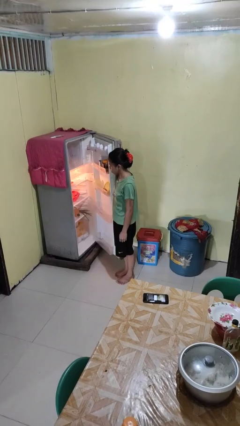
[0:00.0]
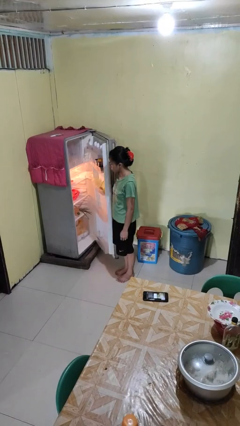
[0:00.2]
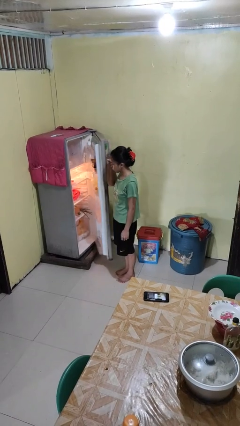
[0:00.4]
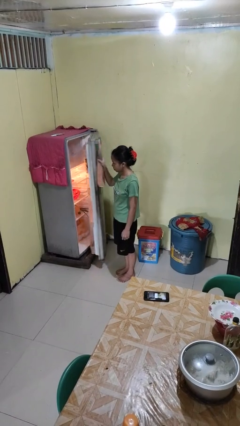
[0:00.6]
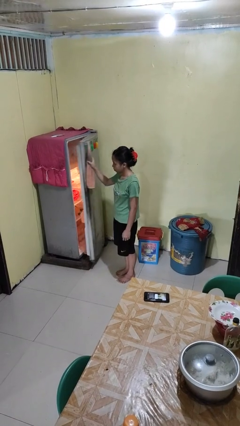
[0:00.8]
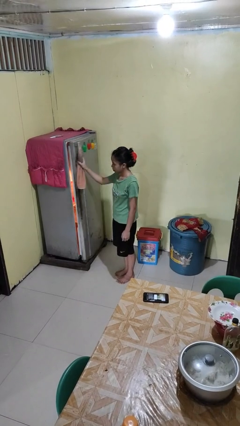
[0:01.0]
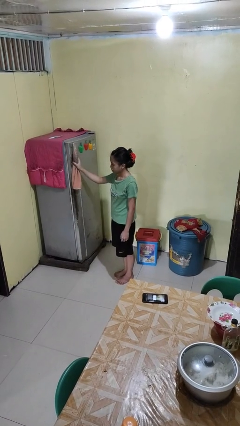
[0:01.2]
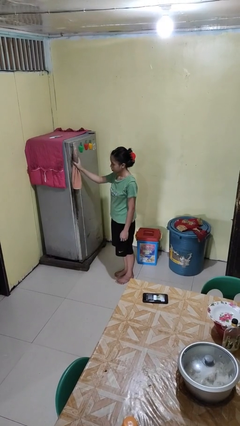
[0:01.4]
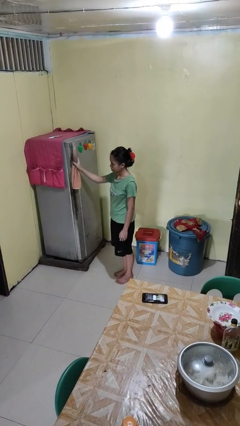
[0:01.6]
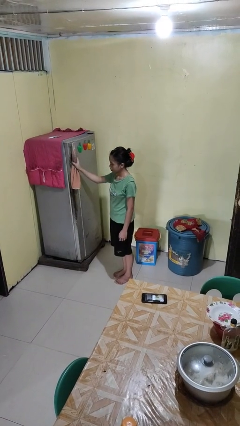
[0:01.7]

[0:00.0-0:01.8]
person closes refrigerator

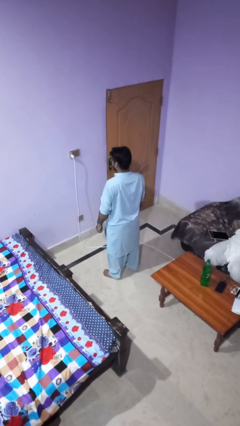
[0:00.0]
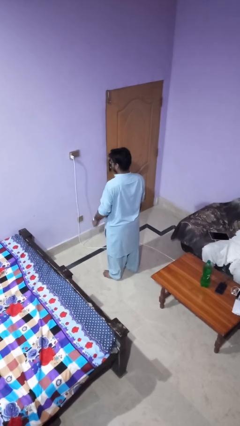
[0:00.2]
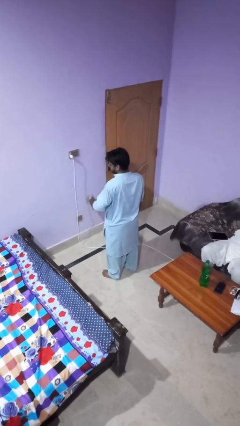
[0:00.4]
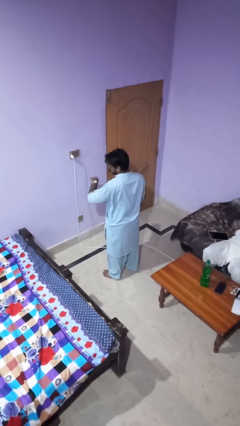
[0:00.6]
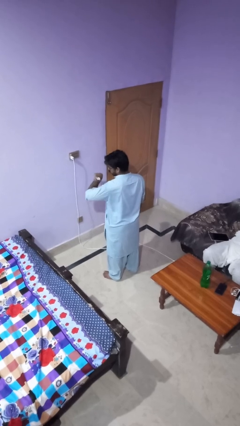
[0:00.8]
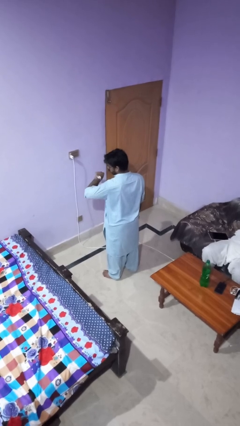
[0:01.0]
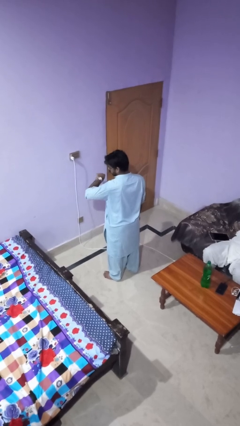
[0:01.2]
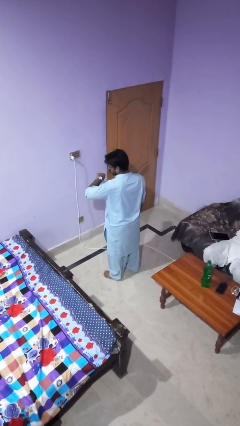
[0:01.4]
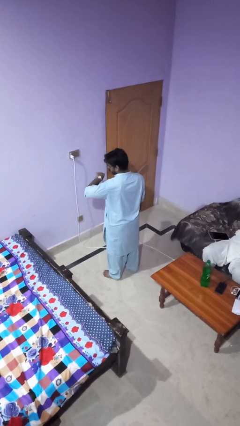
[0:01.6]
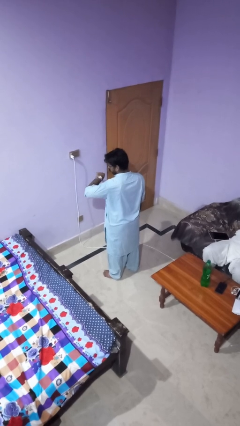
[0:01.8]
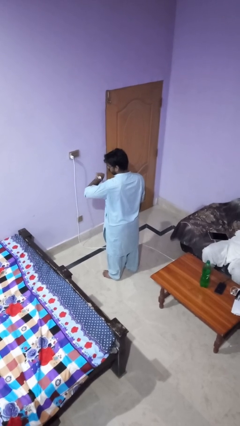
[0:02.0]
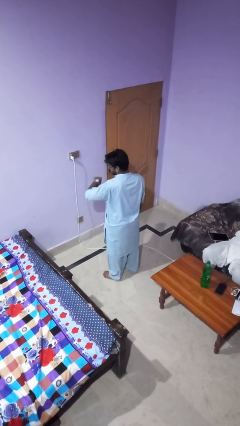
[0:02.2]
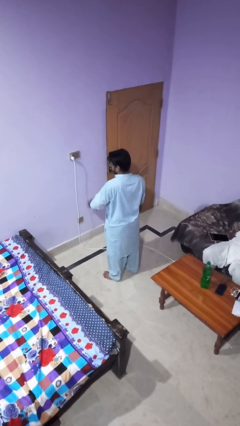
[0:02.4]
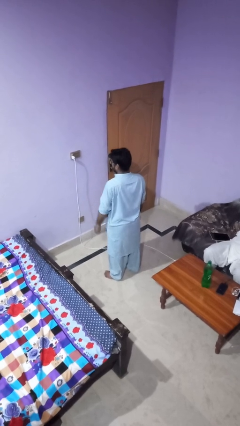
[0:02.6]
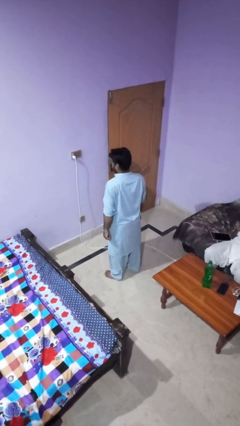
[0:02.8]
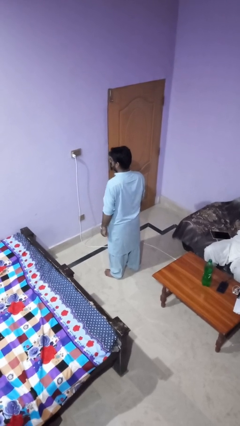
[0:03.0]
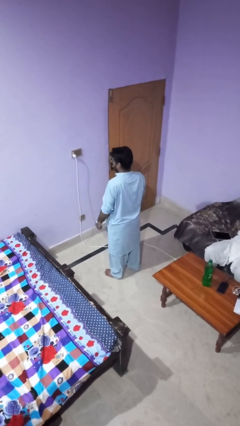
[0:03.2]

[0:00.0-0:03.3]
person looks at wristwatch

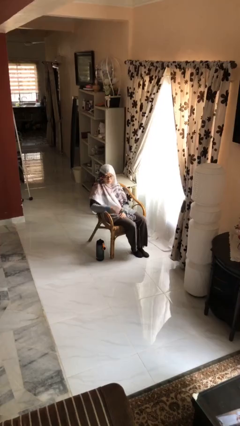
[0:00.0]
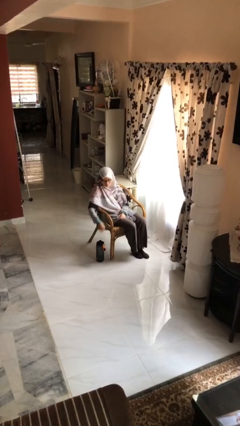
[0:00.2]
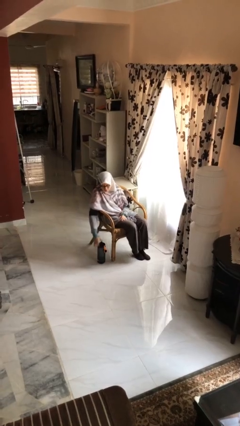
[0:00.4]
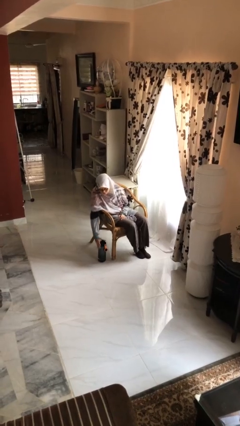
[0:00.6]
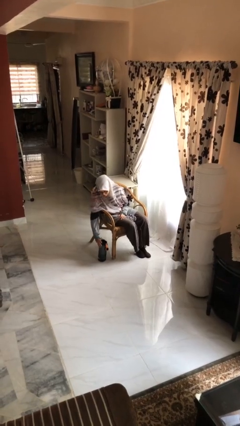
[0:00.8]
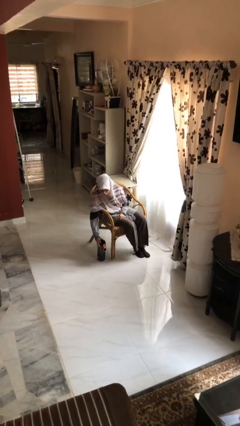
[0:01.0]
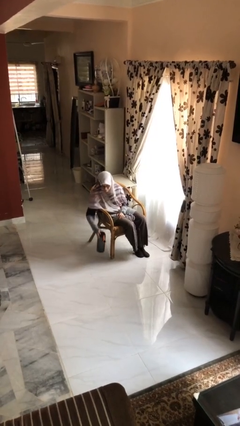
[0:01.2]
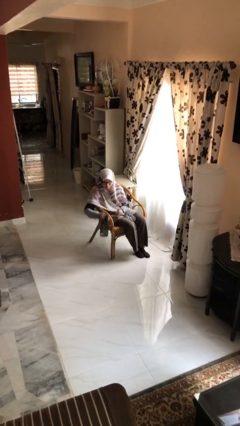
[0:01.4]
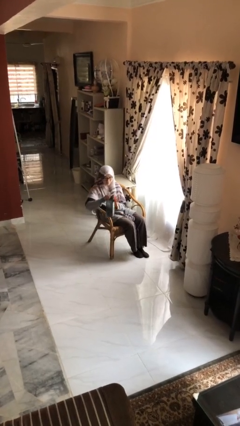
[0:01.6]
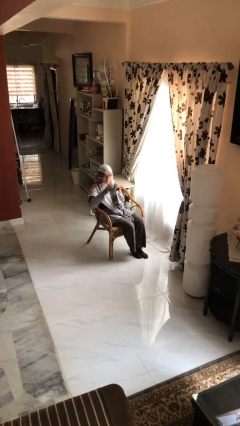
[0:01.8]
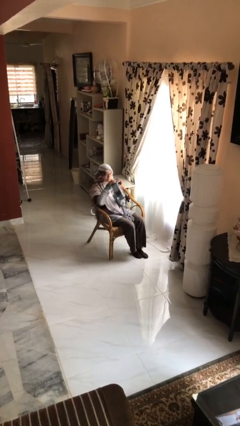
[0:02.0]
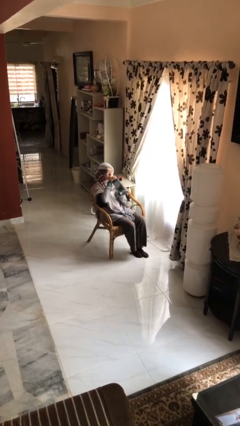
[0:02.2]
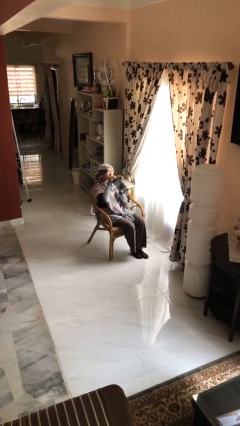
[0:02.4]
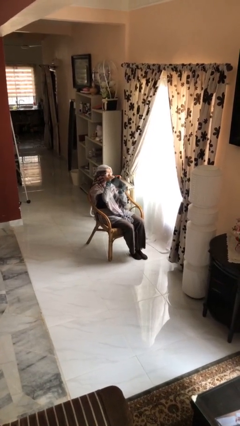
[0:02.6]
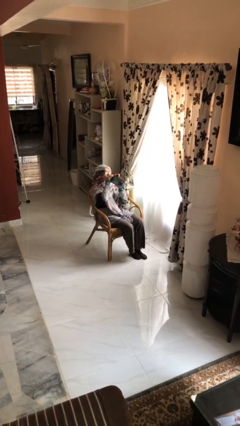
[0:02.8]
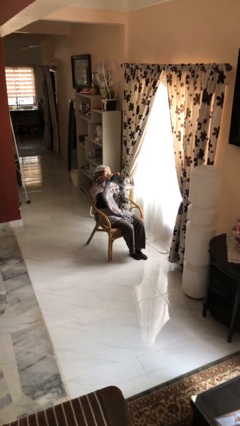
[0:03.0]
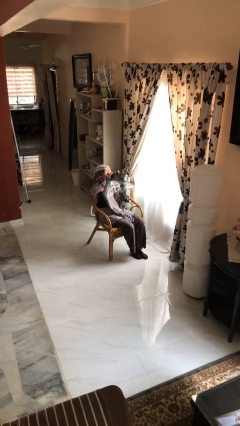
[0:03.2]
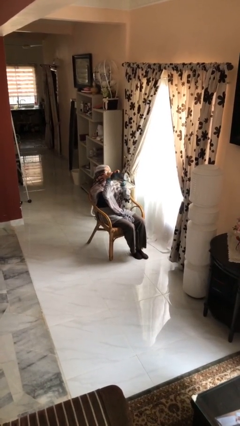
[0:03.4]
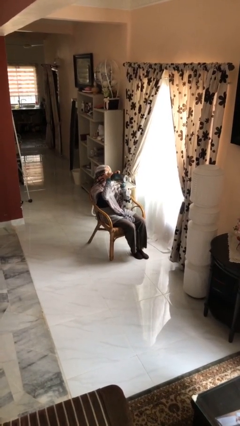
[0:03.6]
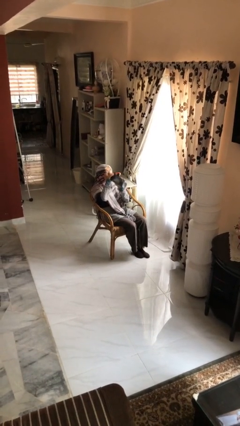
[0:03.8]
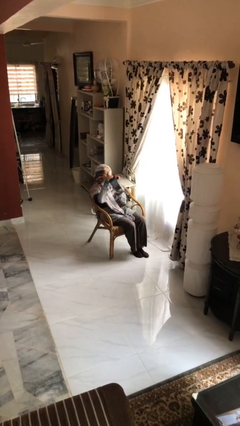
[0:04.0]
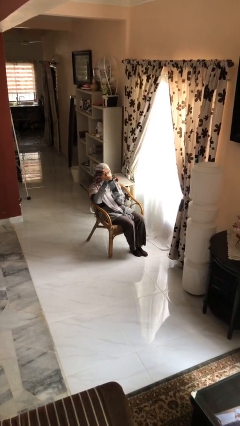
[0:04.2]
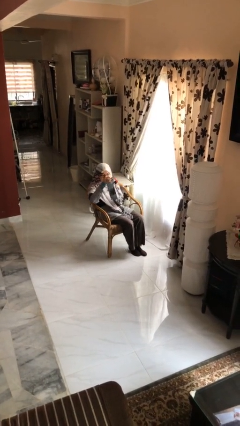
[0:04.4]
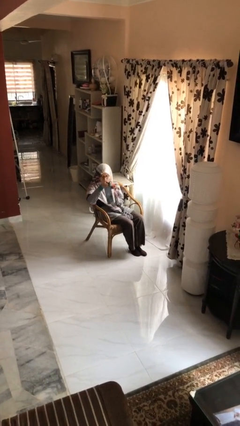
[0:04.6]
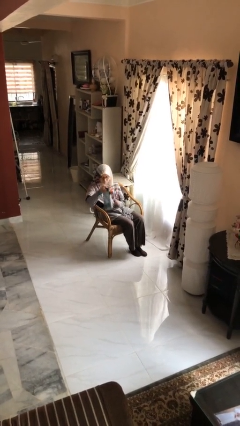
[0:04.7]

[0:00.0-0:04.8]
person drinks from bottle

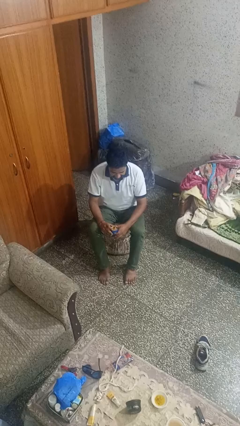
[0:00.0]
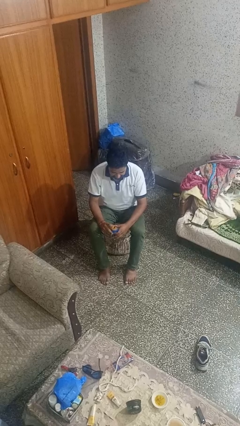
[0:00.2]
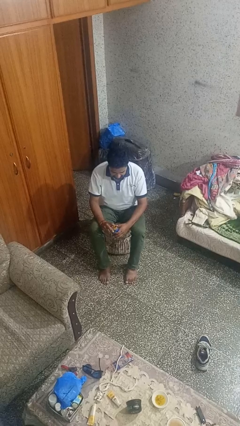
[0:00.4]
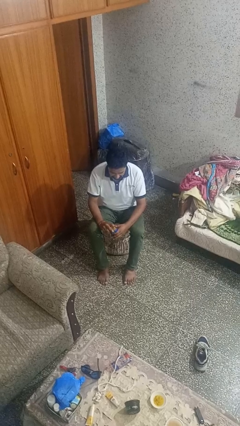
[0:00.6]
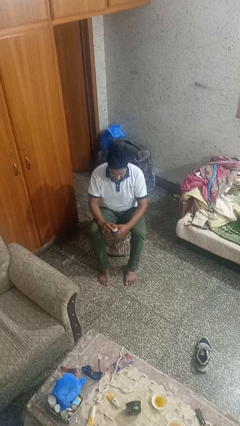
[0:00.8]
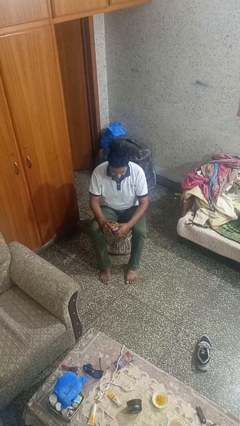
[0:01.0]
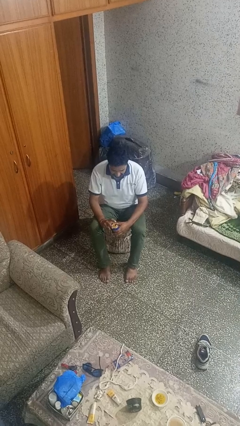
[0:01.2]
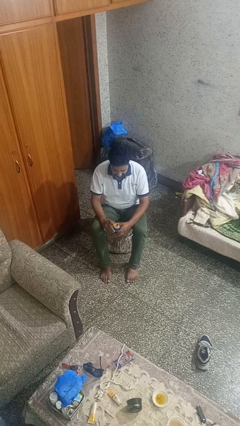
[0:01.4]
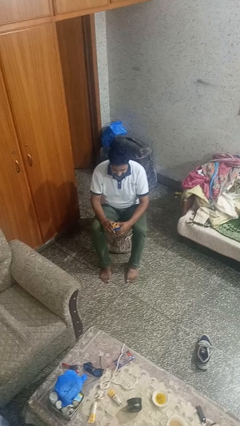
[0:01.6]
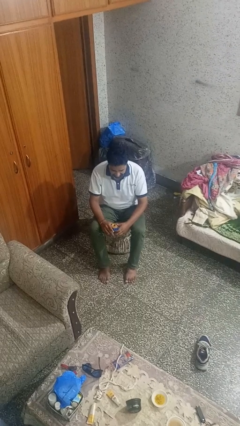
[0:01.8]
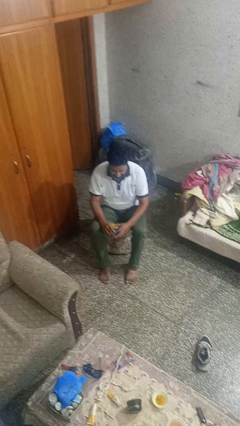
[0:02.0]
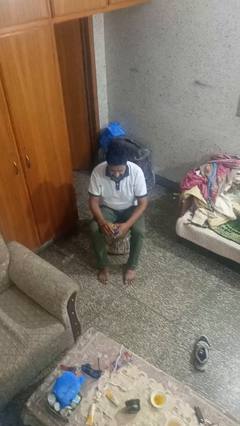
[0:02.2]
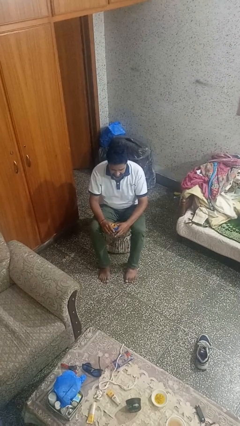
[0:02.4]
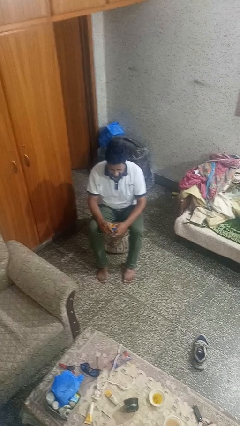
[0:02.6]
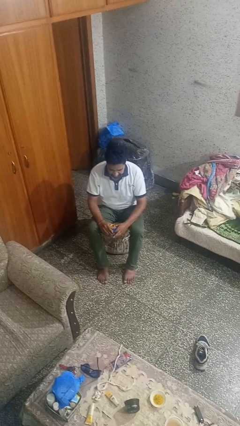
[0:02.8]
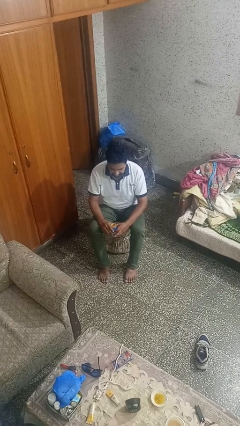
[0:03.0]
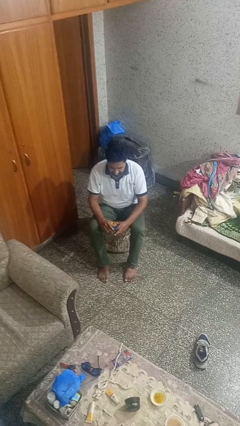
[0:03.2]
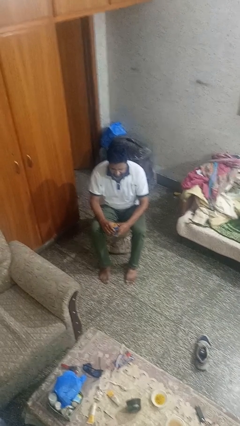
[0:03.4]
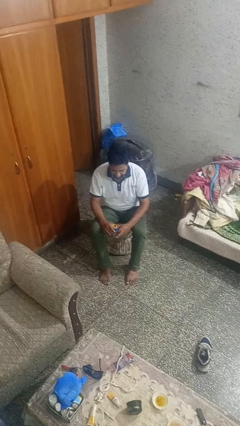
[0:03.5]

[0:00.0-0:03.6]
person opens beverage can

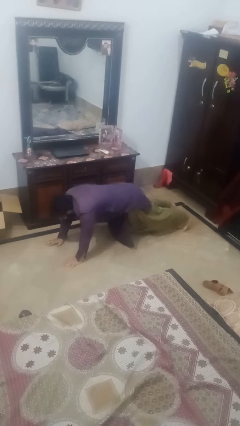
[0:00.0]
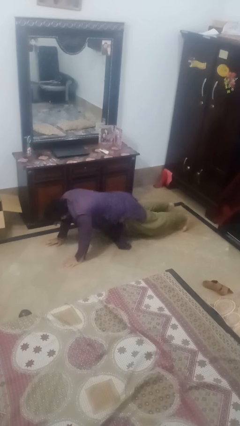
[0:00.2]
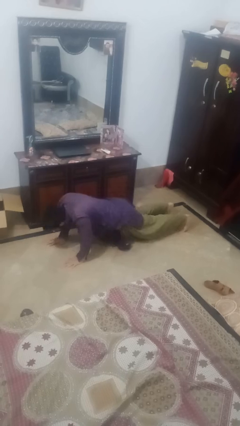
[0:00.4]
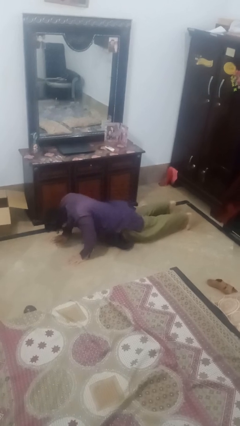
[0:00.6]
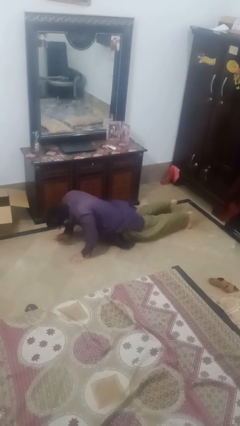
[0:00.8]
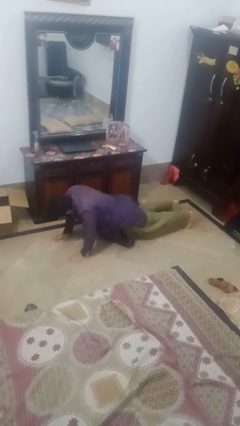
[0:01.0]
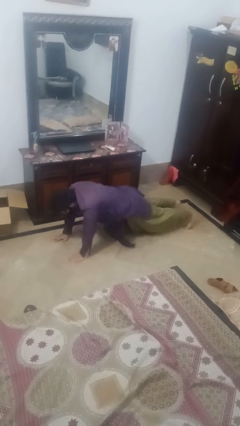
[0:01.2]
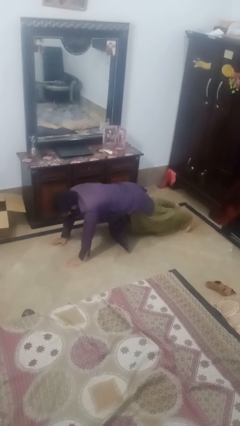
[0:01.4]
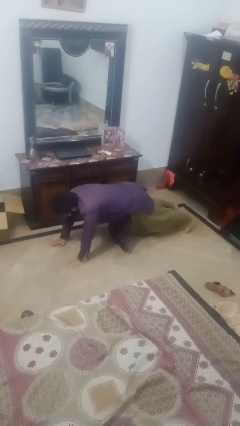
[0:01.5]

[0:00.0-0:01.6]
person exercises with pushup

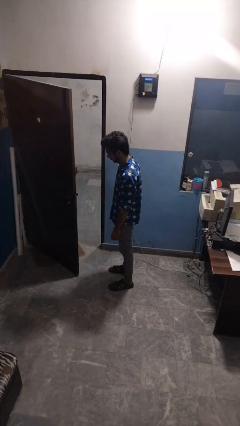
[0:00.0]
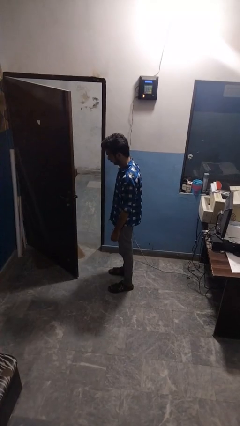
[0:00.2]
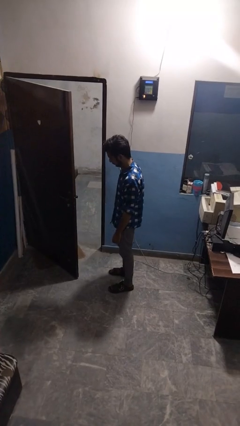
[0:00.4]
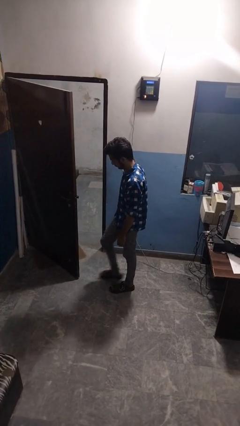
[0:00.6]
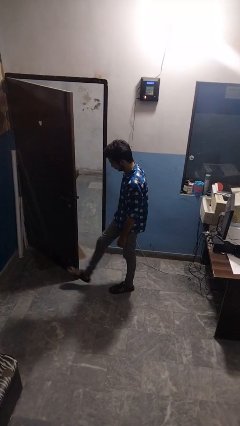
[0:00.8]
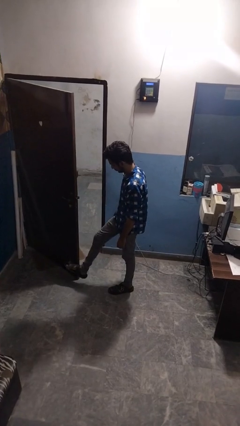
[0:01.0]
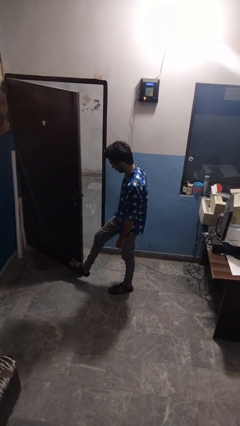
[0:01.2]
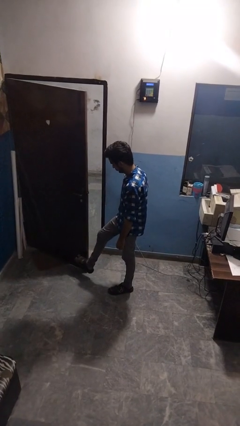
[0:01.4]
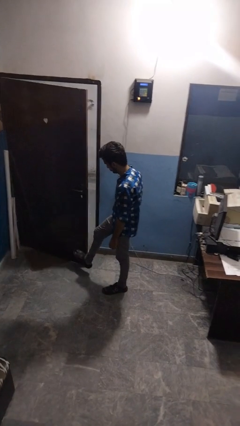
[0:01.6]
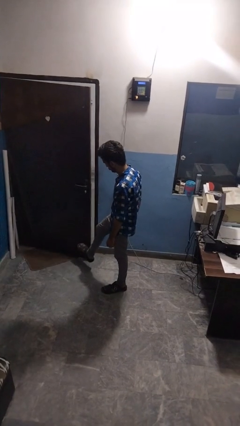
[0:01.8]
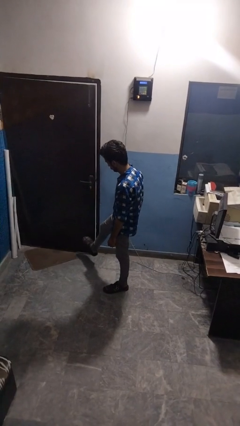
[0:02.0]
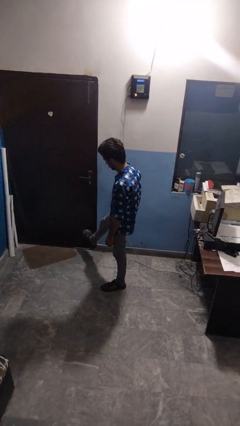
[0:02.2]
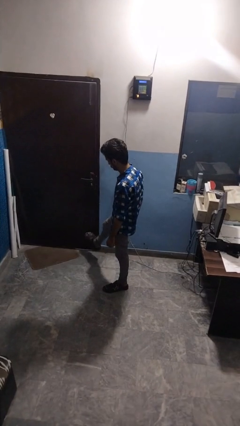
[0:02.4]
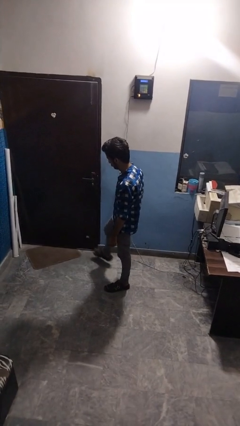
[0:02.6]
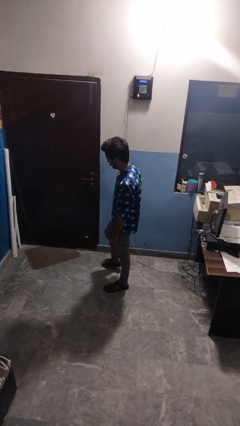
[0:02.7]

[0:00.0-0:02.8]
person closes door with foot
